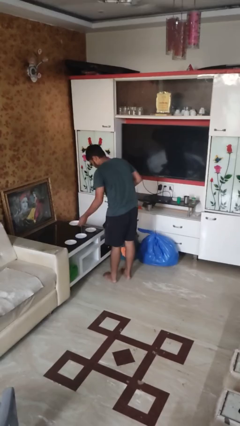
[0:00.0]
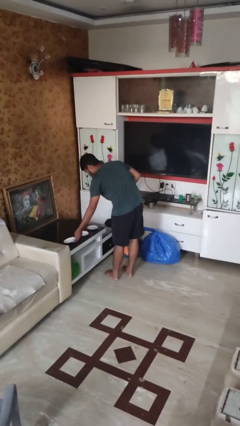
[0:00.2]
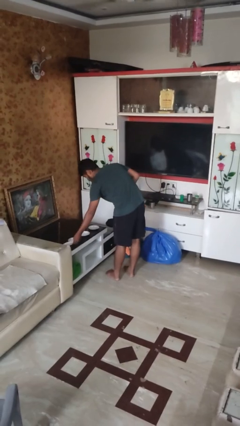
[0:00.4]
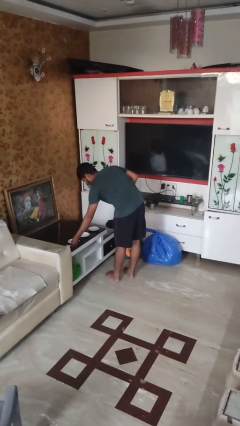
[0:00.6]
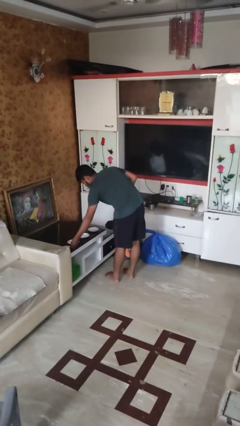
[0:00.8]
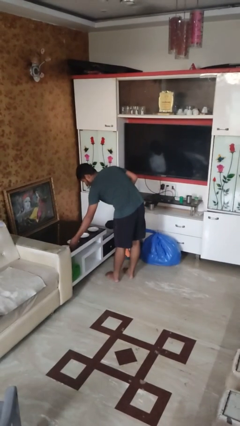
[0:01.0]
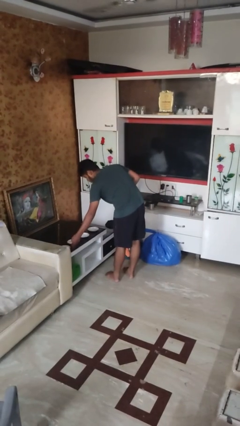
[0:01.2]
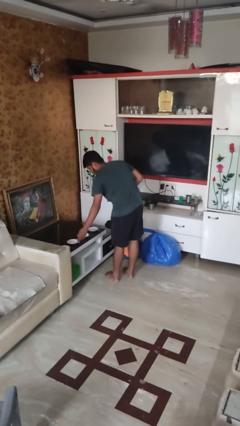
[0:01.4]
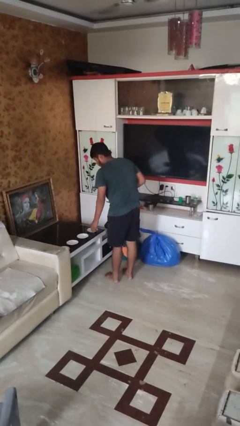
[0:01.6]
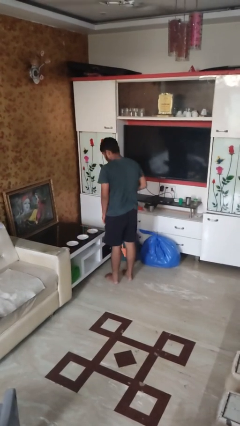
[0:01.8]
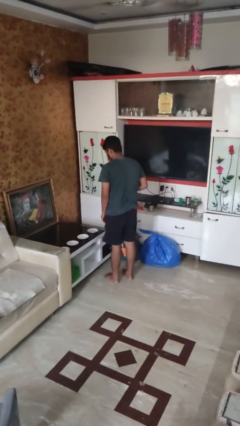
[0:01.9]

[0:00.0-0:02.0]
person sets table

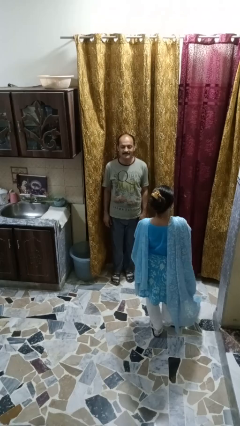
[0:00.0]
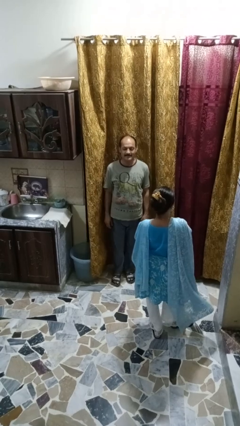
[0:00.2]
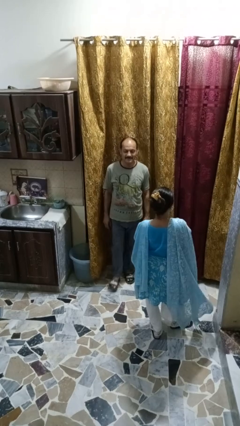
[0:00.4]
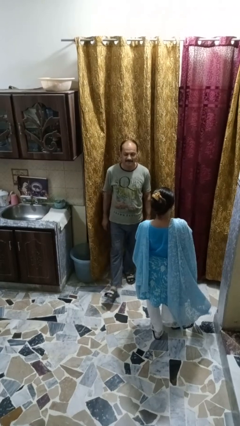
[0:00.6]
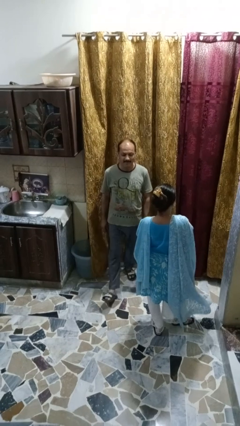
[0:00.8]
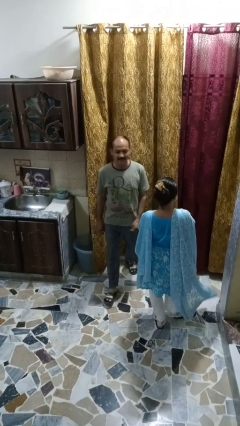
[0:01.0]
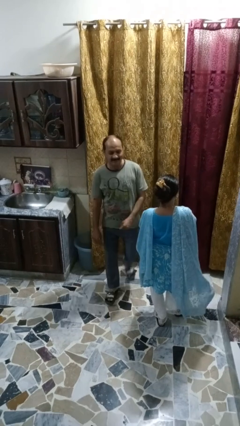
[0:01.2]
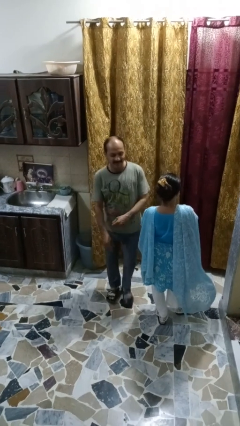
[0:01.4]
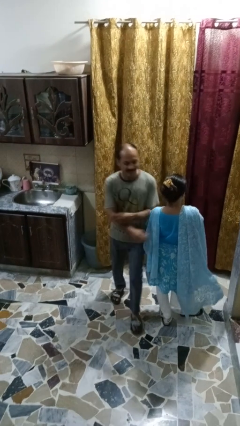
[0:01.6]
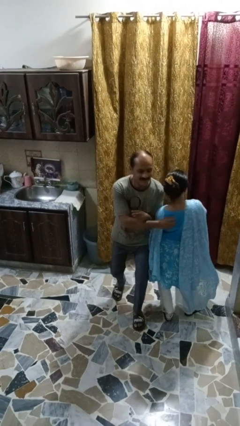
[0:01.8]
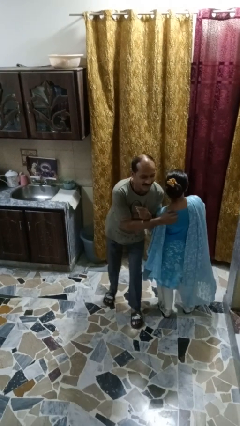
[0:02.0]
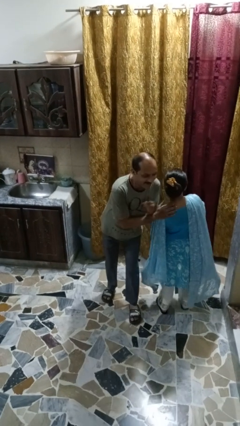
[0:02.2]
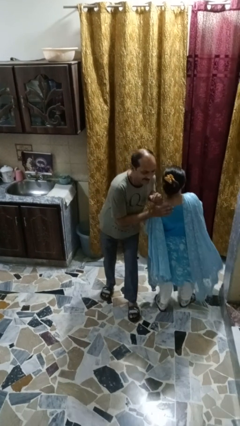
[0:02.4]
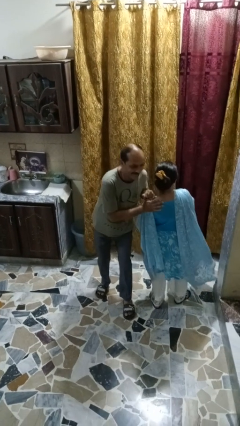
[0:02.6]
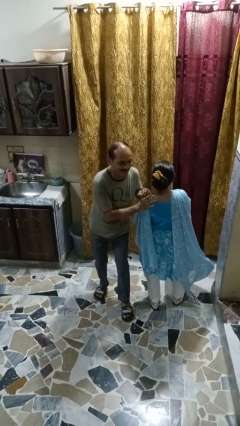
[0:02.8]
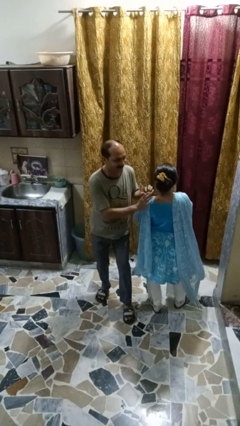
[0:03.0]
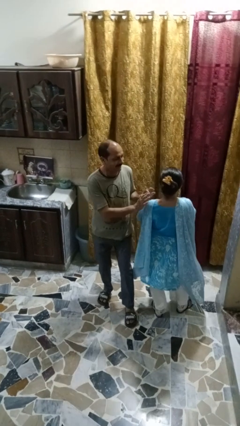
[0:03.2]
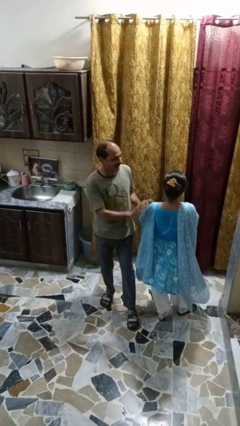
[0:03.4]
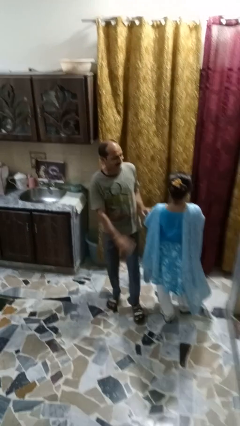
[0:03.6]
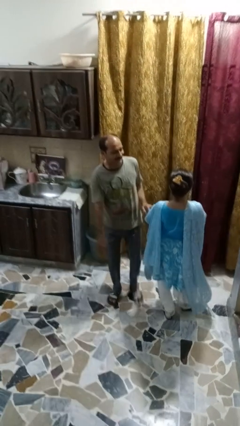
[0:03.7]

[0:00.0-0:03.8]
person bumps into person

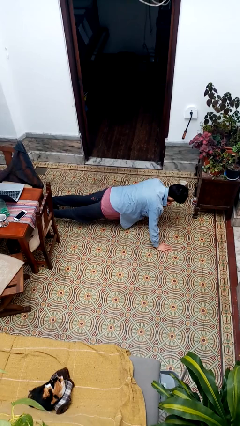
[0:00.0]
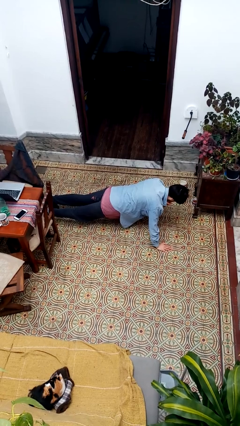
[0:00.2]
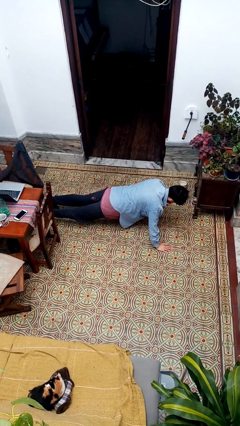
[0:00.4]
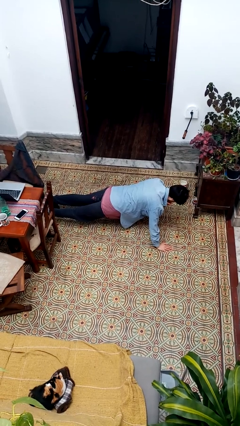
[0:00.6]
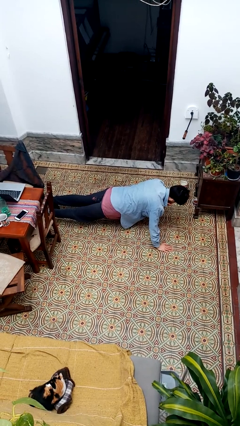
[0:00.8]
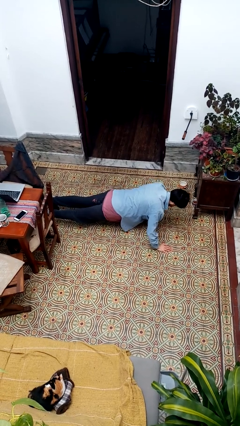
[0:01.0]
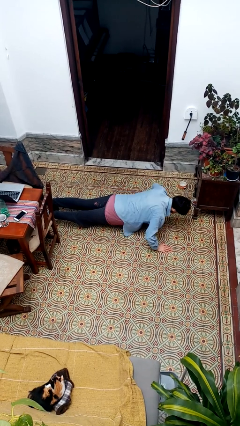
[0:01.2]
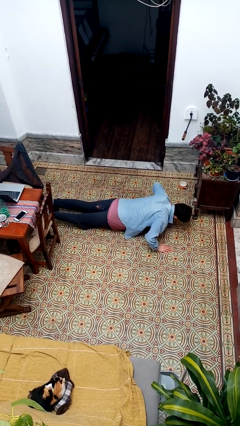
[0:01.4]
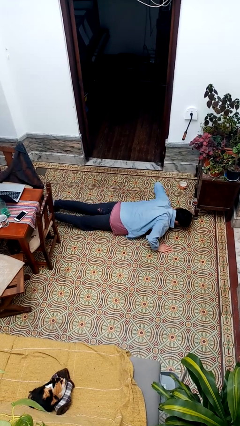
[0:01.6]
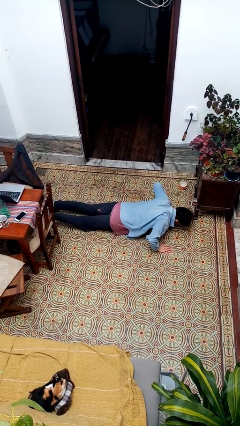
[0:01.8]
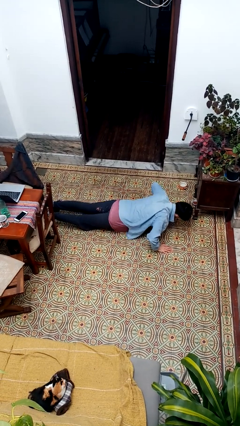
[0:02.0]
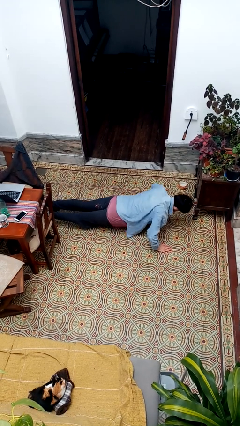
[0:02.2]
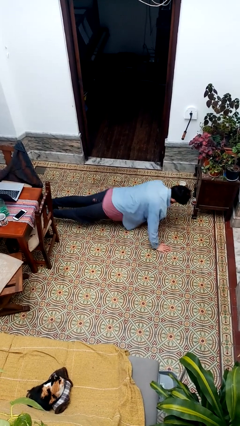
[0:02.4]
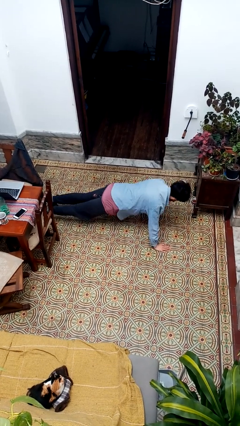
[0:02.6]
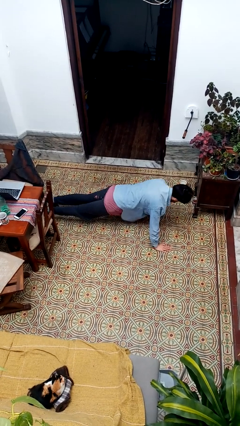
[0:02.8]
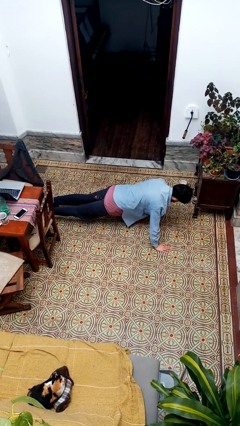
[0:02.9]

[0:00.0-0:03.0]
person exercises with pushup

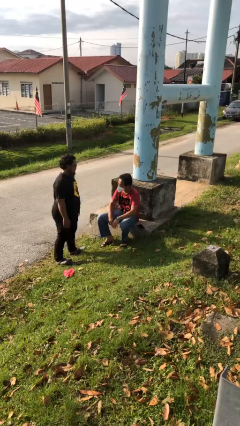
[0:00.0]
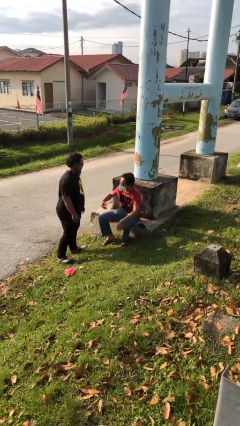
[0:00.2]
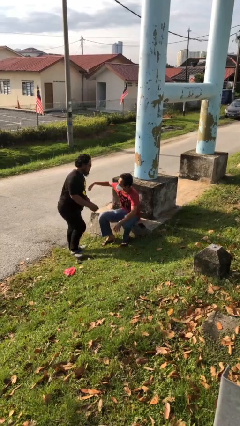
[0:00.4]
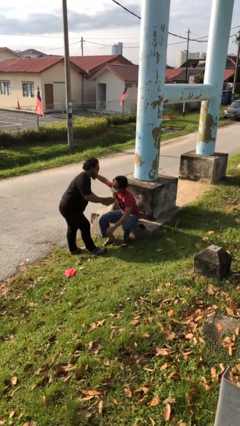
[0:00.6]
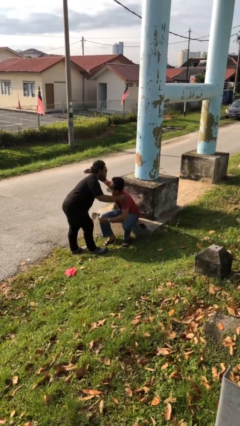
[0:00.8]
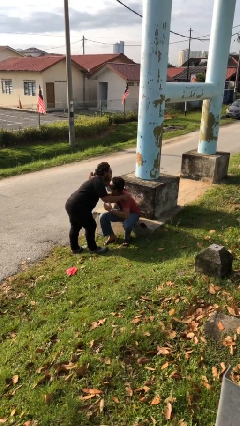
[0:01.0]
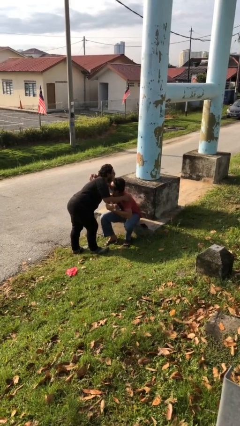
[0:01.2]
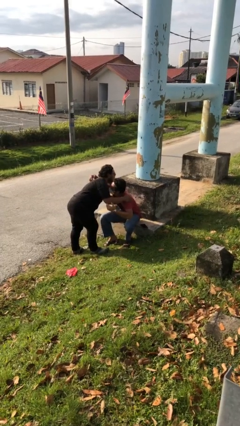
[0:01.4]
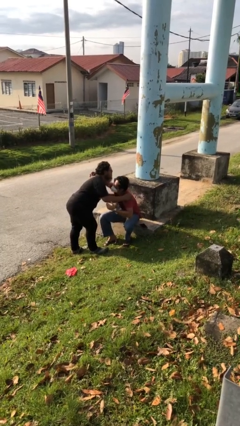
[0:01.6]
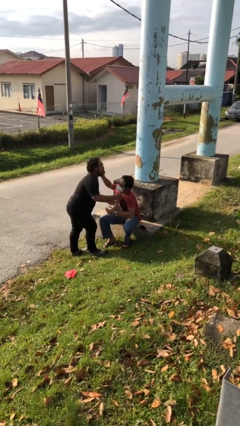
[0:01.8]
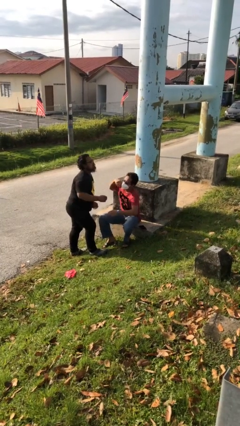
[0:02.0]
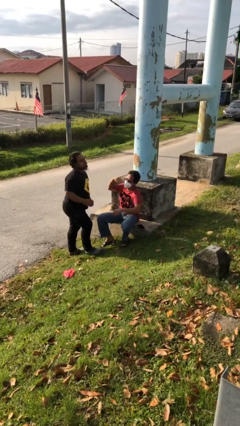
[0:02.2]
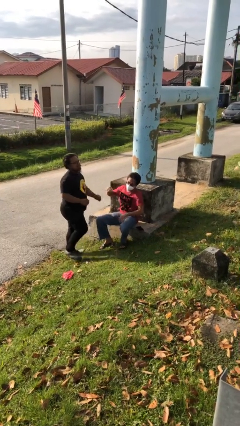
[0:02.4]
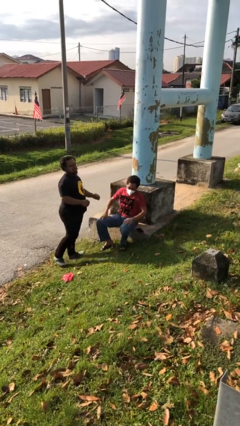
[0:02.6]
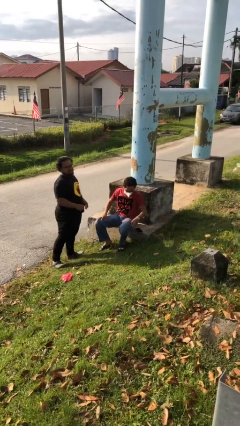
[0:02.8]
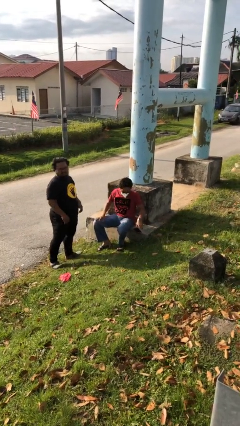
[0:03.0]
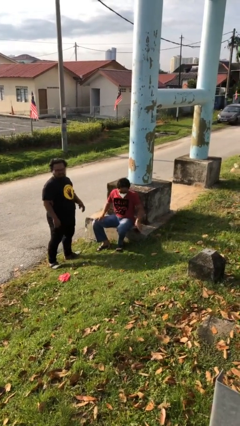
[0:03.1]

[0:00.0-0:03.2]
person embraces person

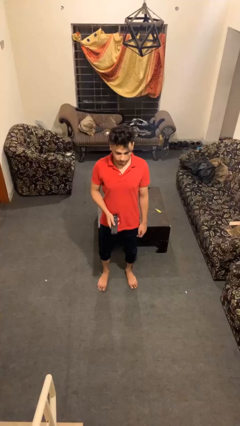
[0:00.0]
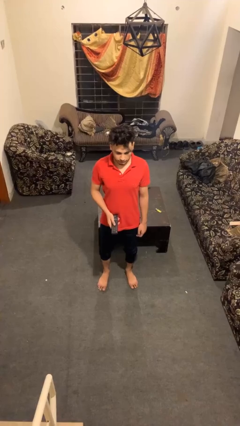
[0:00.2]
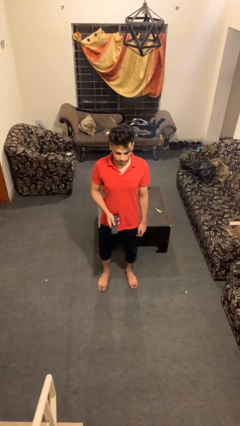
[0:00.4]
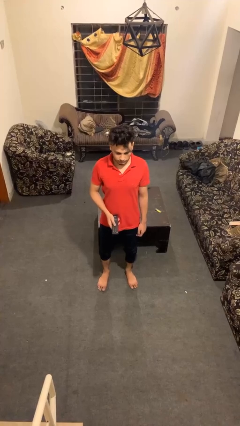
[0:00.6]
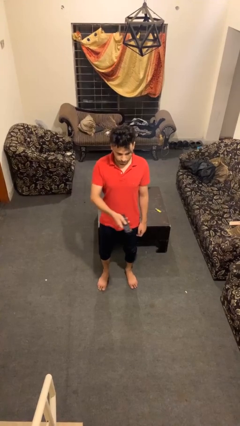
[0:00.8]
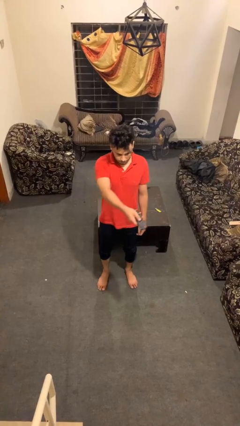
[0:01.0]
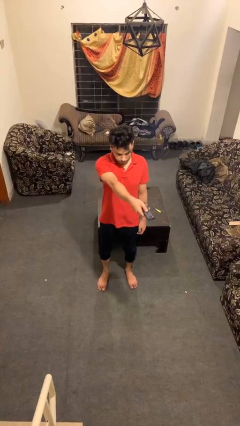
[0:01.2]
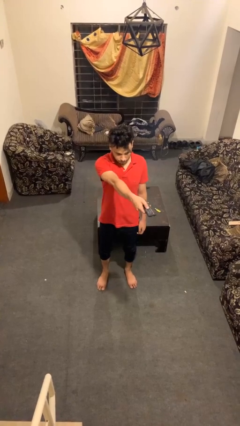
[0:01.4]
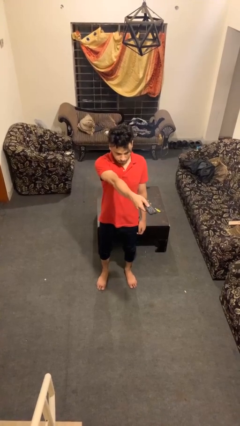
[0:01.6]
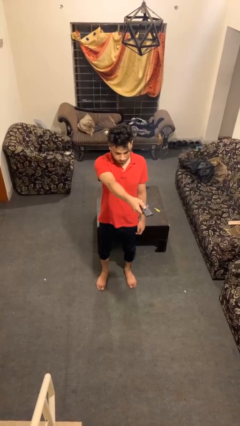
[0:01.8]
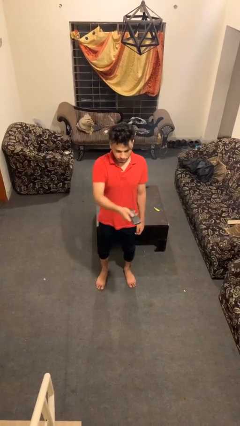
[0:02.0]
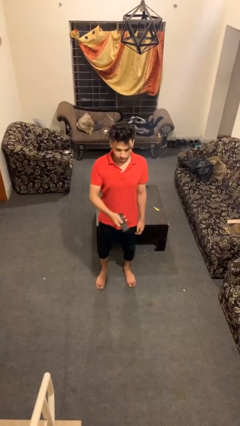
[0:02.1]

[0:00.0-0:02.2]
person uses television remote

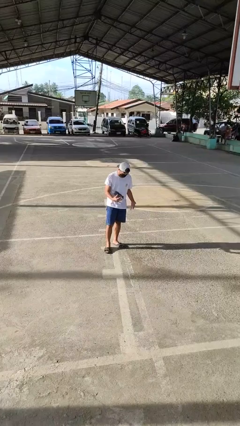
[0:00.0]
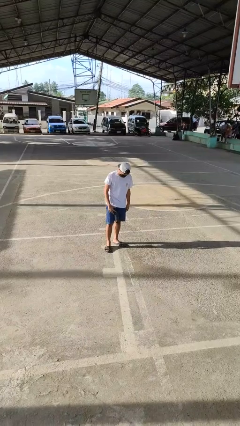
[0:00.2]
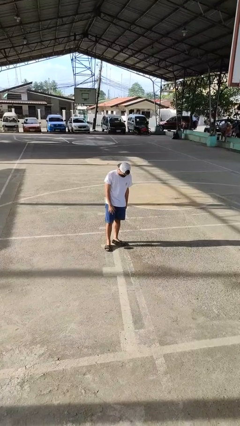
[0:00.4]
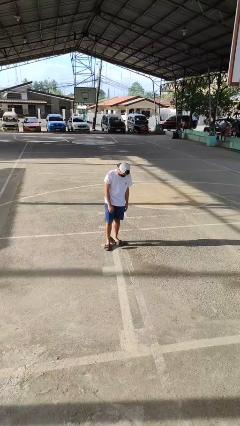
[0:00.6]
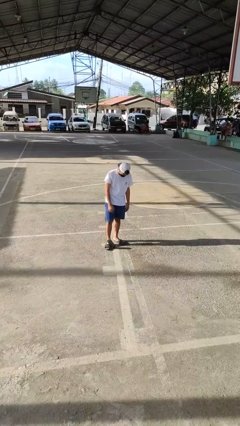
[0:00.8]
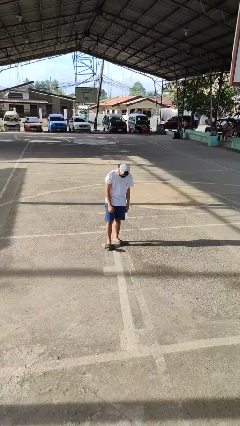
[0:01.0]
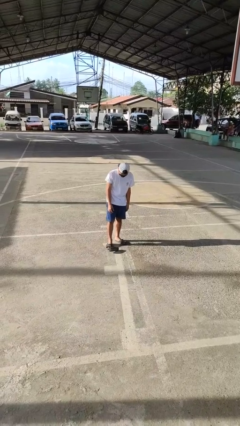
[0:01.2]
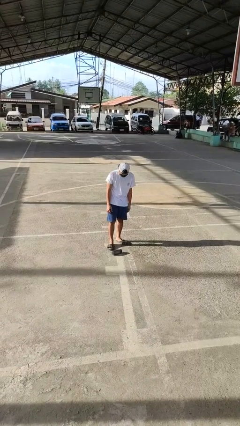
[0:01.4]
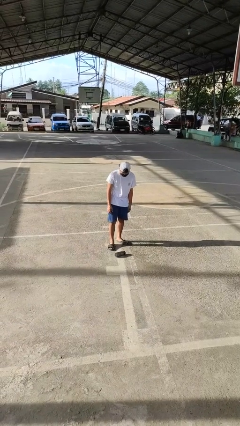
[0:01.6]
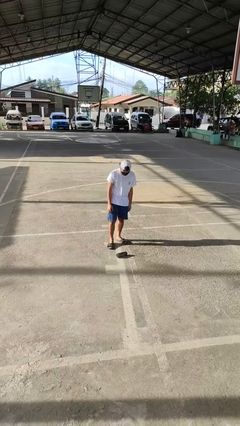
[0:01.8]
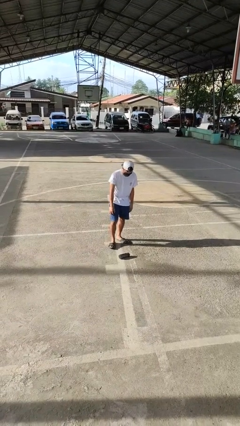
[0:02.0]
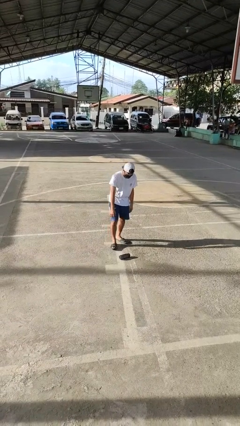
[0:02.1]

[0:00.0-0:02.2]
person drops object

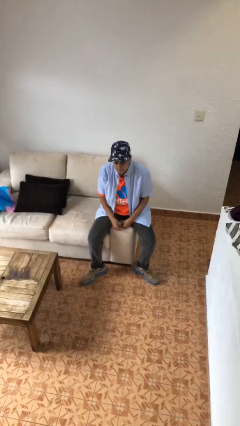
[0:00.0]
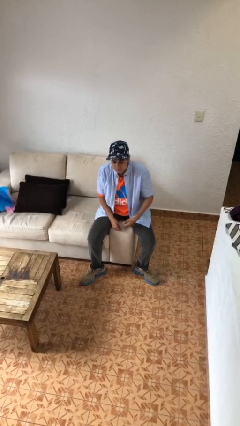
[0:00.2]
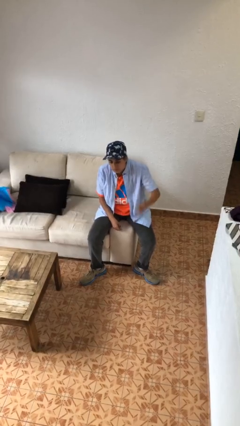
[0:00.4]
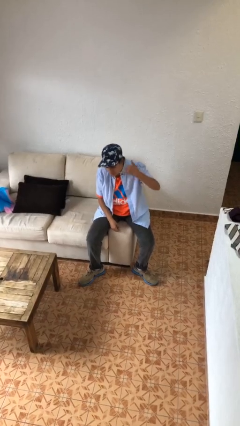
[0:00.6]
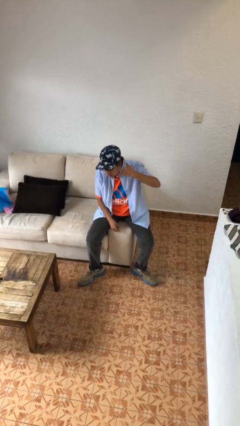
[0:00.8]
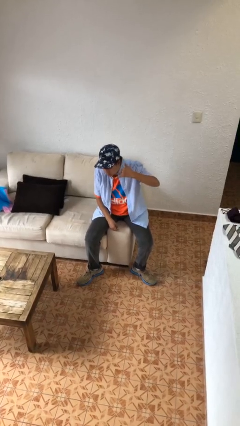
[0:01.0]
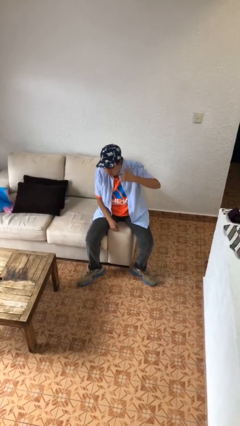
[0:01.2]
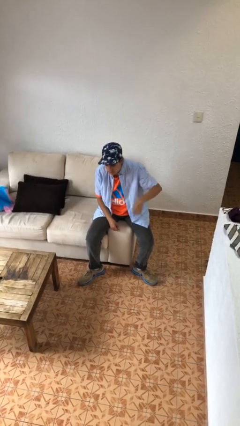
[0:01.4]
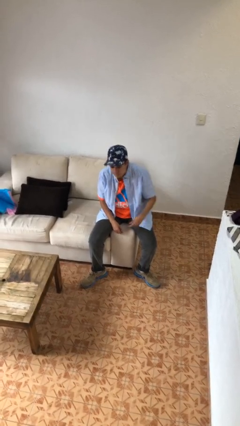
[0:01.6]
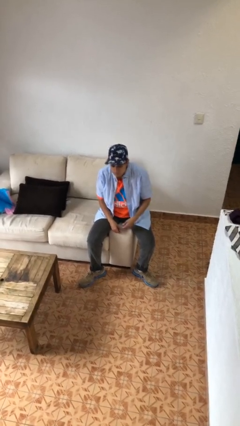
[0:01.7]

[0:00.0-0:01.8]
person gestures call me
